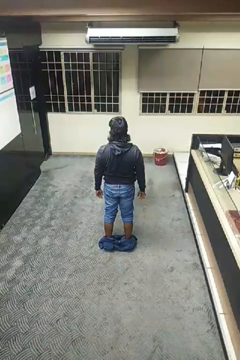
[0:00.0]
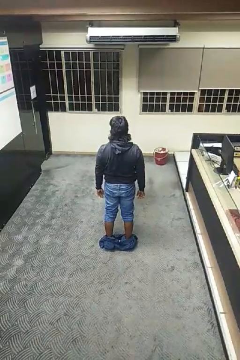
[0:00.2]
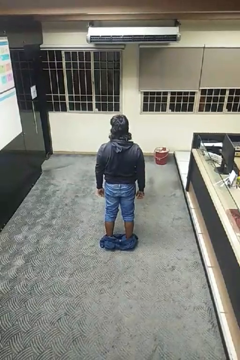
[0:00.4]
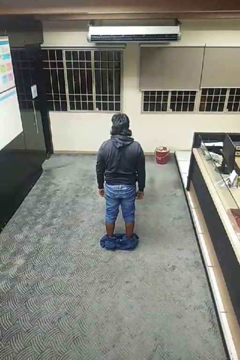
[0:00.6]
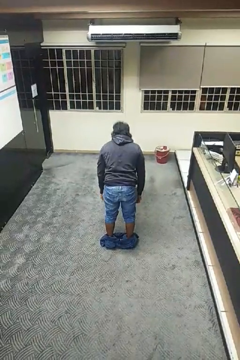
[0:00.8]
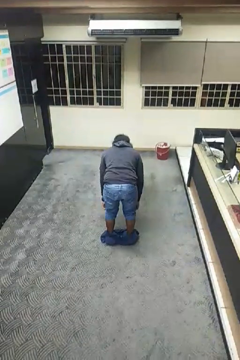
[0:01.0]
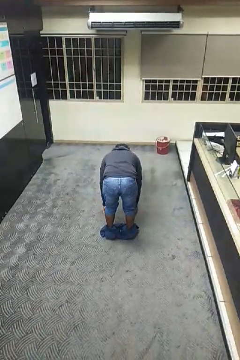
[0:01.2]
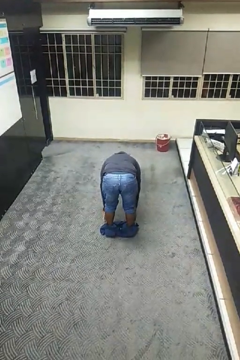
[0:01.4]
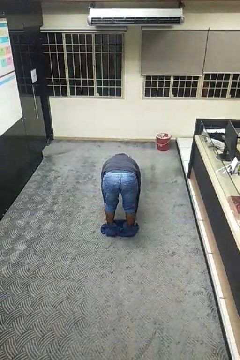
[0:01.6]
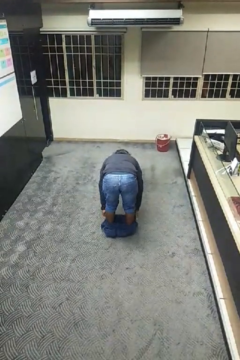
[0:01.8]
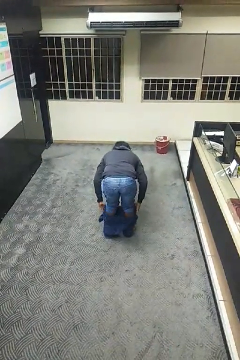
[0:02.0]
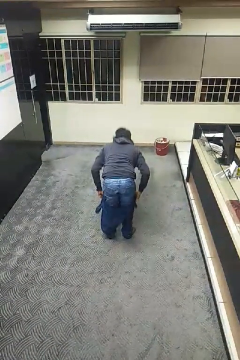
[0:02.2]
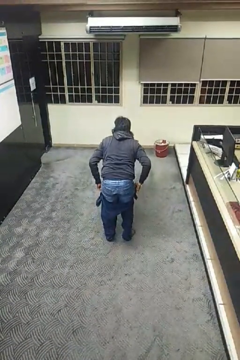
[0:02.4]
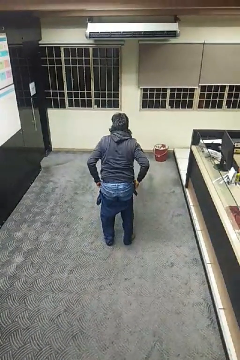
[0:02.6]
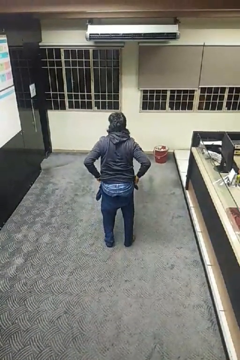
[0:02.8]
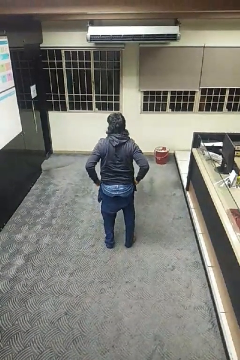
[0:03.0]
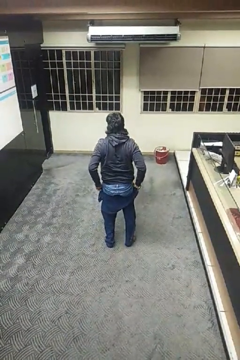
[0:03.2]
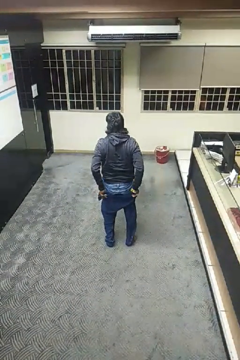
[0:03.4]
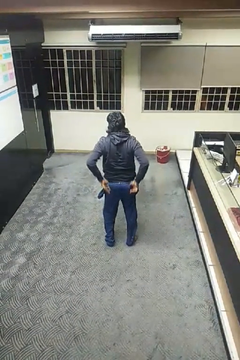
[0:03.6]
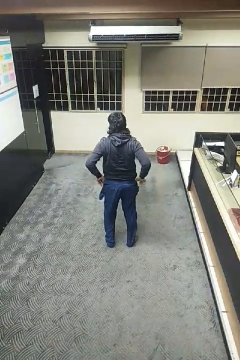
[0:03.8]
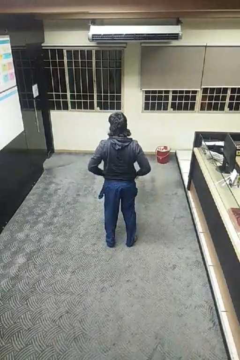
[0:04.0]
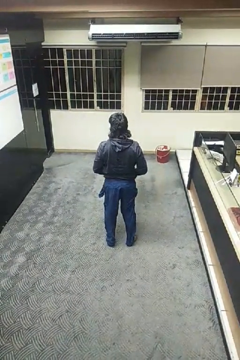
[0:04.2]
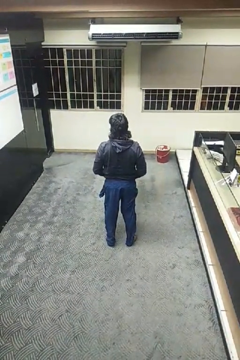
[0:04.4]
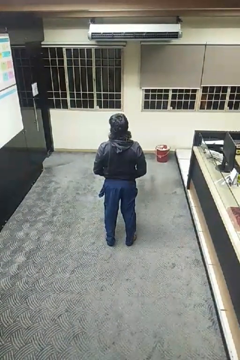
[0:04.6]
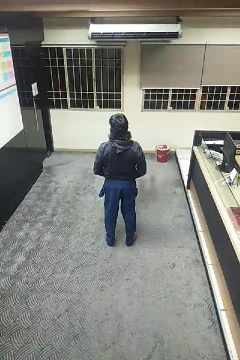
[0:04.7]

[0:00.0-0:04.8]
person puts on pants

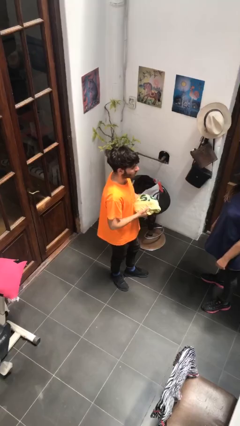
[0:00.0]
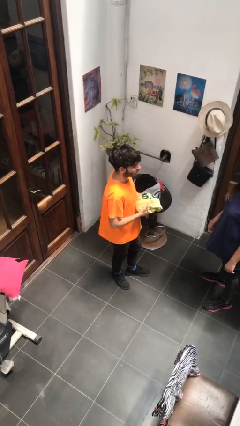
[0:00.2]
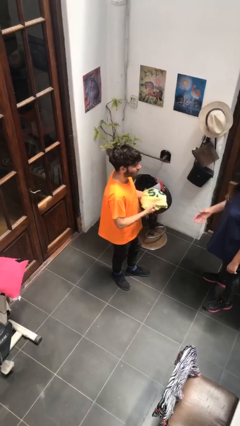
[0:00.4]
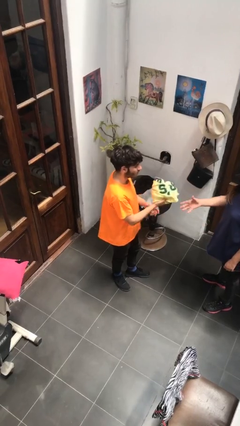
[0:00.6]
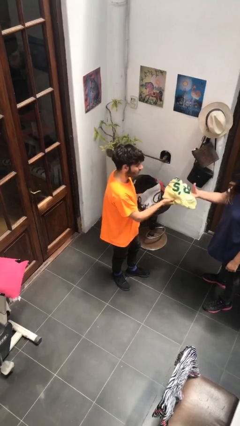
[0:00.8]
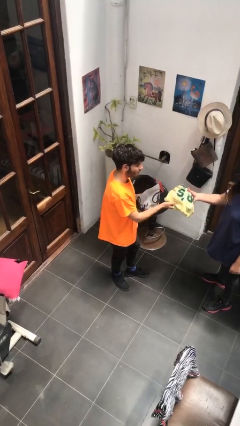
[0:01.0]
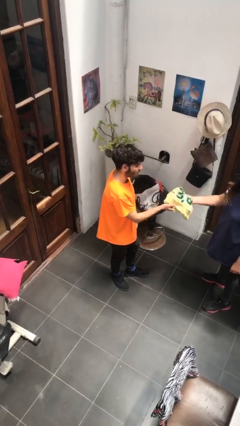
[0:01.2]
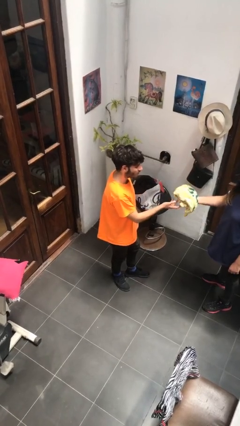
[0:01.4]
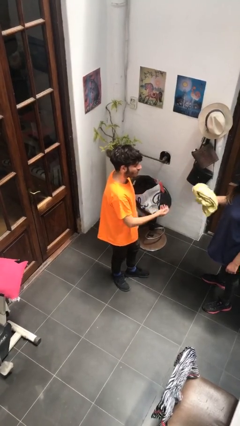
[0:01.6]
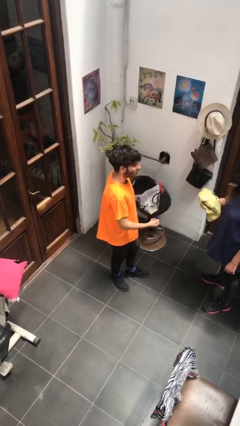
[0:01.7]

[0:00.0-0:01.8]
person transfers object to person

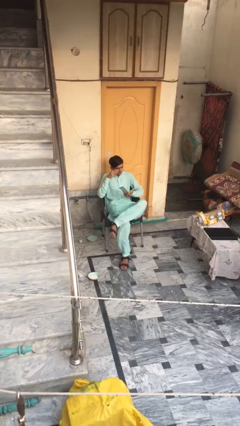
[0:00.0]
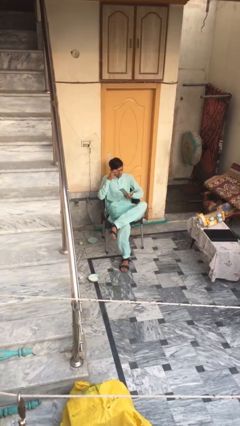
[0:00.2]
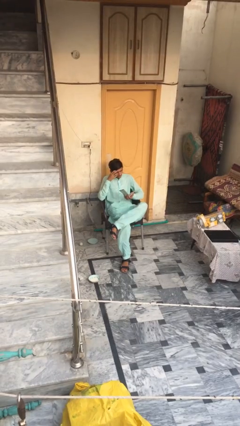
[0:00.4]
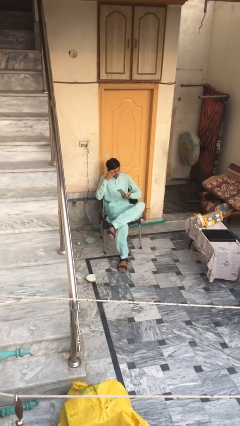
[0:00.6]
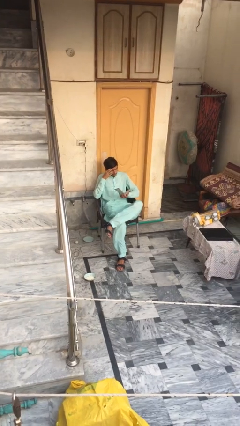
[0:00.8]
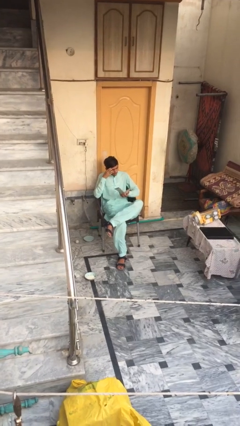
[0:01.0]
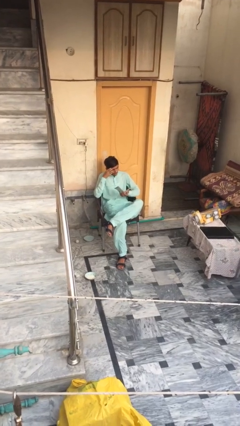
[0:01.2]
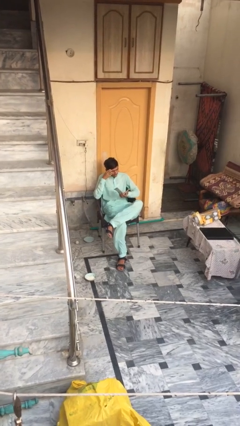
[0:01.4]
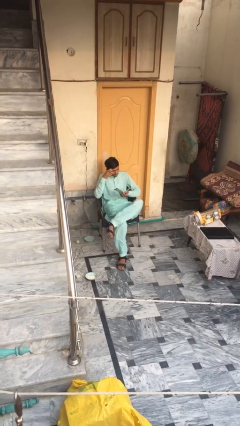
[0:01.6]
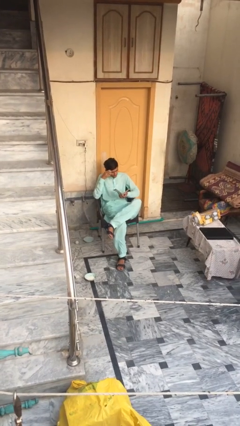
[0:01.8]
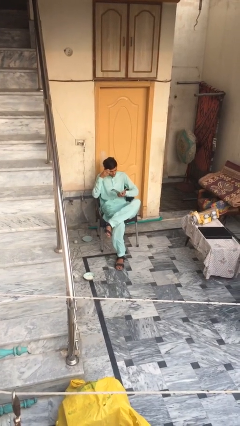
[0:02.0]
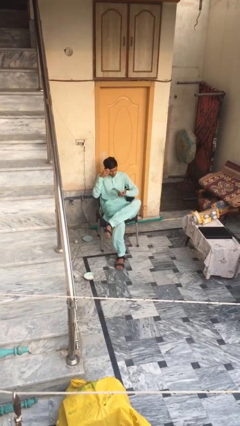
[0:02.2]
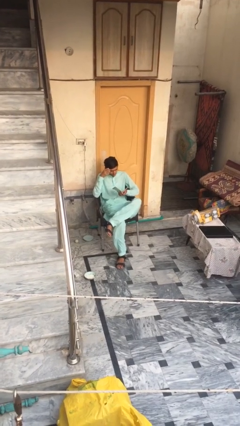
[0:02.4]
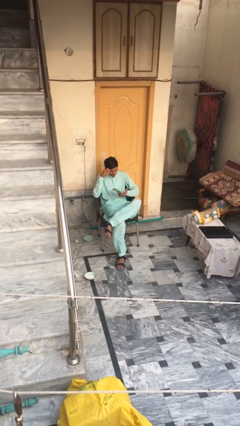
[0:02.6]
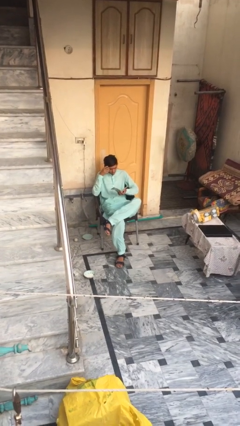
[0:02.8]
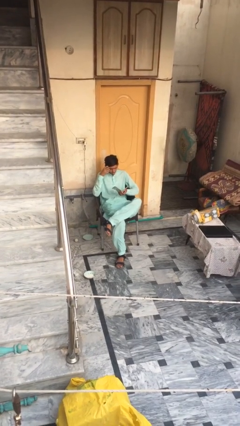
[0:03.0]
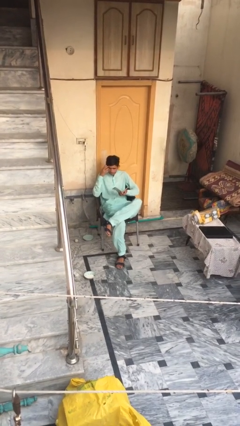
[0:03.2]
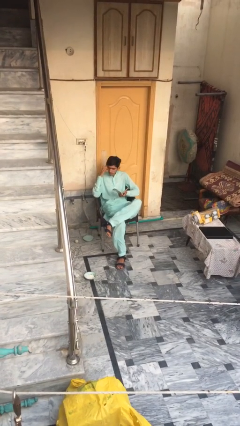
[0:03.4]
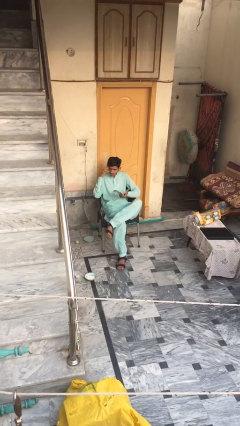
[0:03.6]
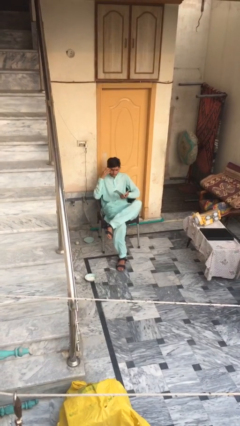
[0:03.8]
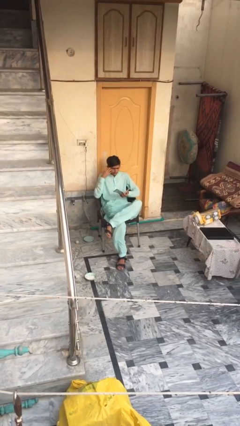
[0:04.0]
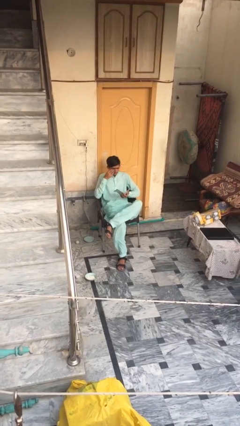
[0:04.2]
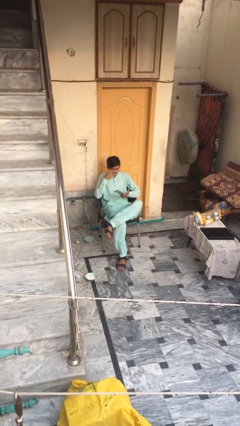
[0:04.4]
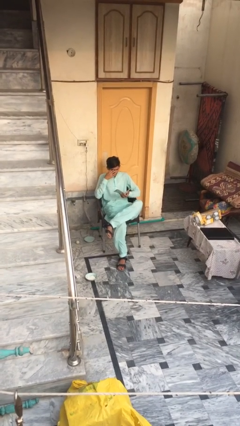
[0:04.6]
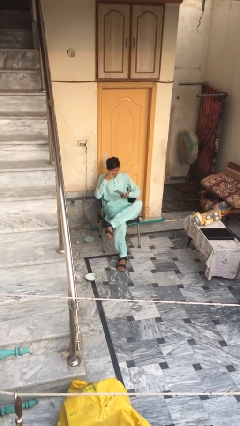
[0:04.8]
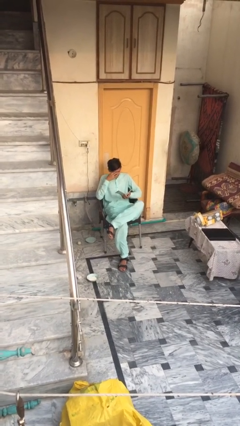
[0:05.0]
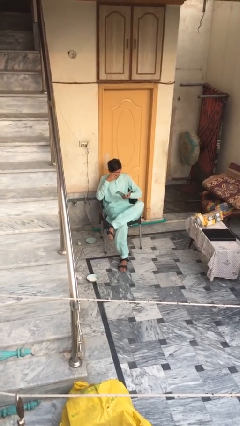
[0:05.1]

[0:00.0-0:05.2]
person reads document

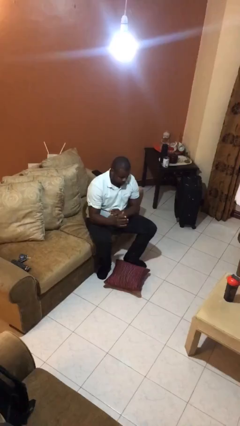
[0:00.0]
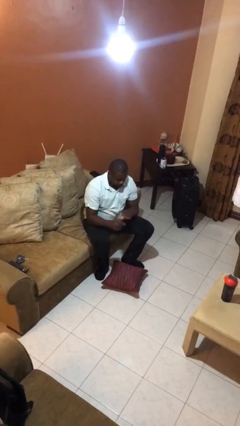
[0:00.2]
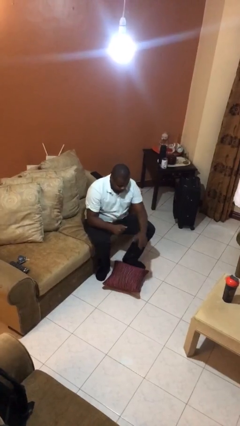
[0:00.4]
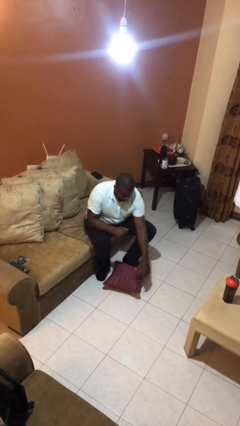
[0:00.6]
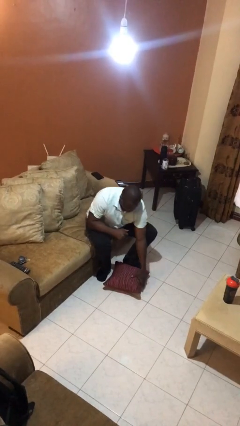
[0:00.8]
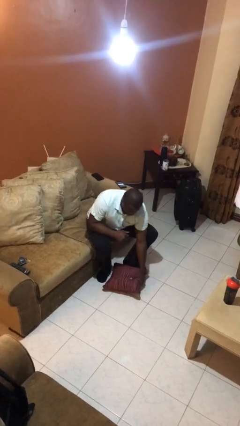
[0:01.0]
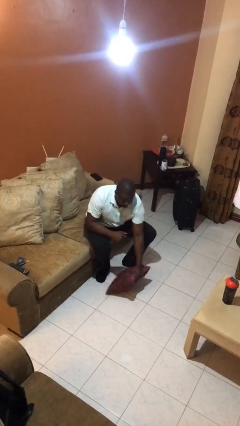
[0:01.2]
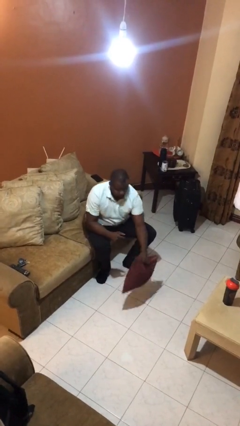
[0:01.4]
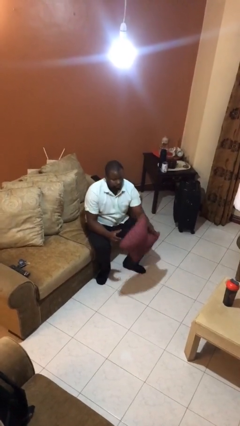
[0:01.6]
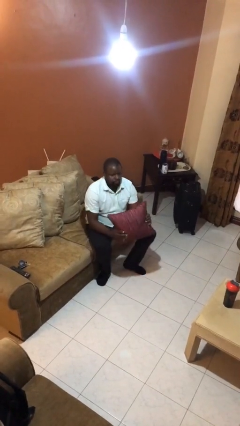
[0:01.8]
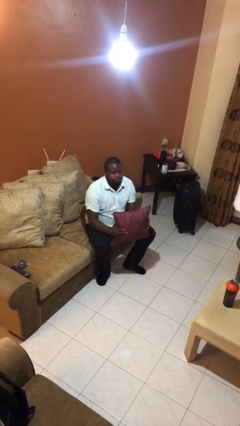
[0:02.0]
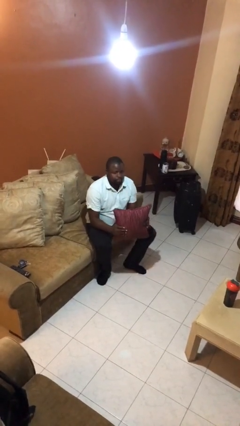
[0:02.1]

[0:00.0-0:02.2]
person picks up object from floor

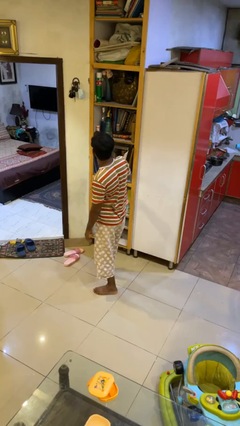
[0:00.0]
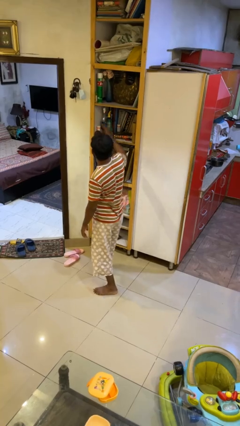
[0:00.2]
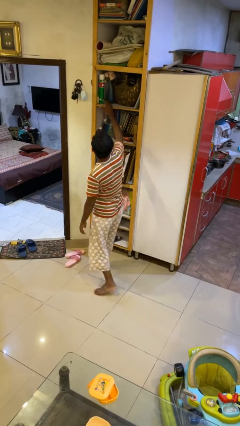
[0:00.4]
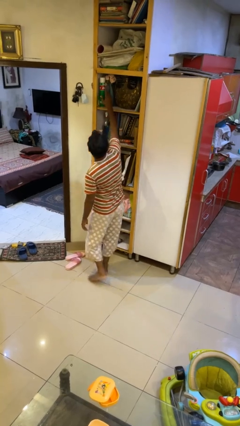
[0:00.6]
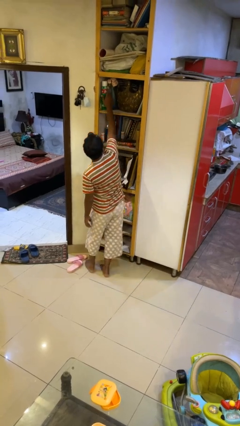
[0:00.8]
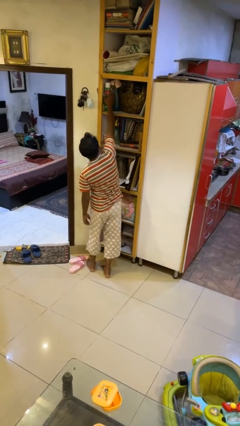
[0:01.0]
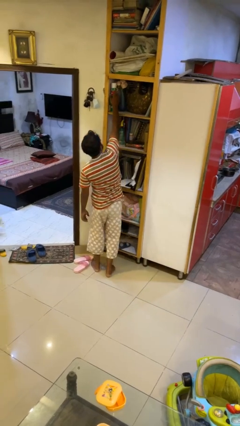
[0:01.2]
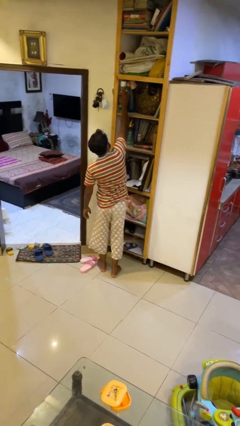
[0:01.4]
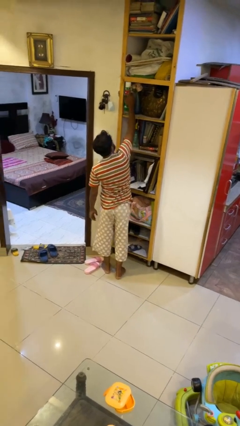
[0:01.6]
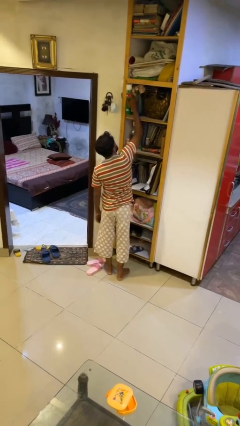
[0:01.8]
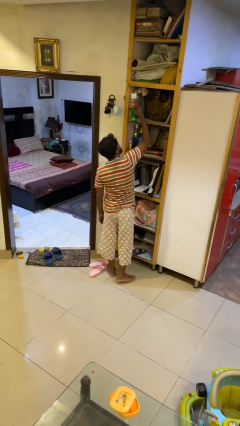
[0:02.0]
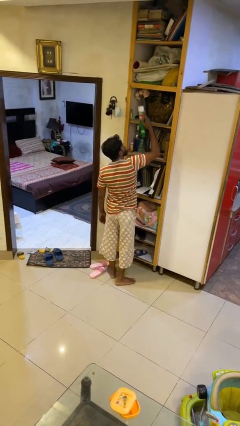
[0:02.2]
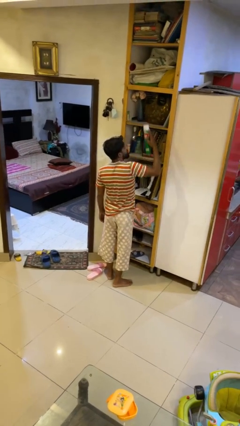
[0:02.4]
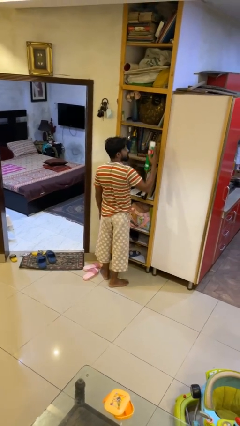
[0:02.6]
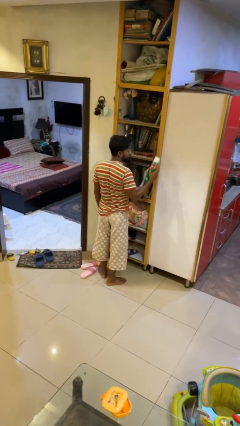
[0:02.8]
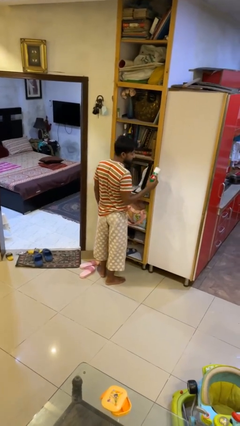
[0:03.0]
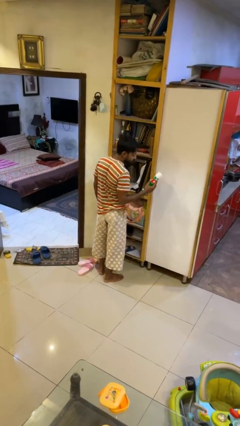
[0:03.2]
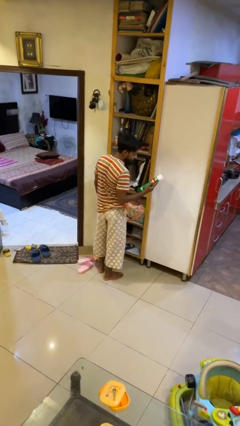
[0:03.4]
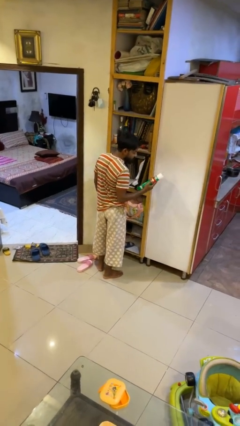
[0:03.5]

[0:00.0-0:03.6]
person picks up object from shelf

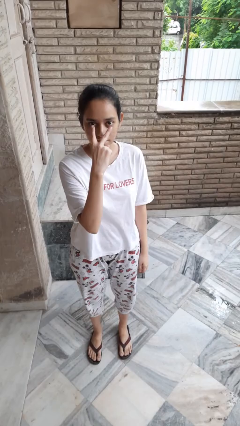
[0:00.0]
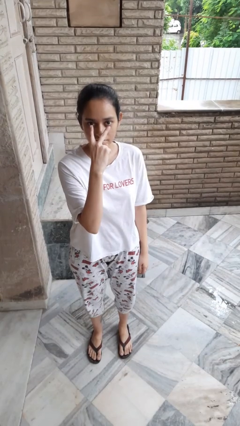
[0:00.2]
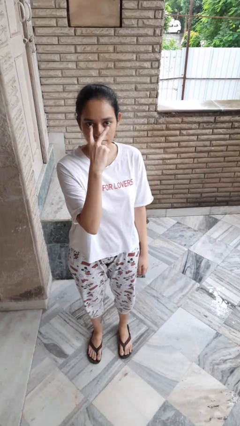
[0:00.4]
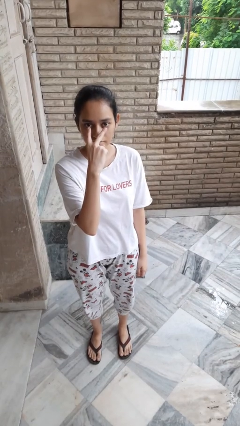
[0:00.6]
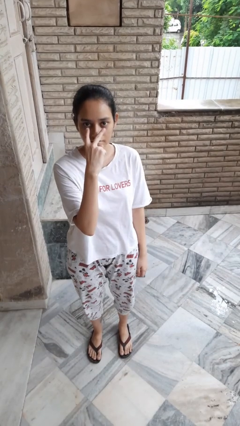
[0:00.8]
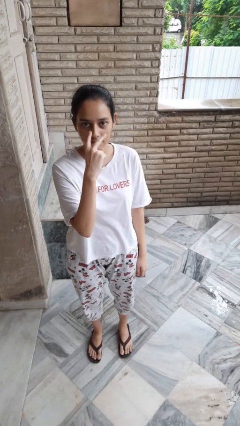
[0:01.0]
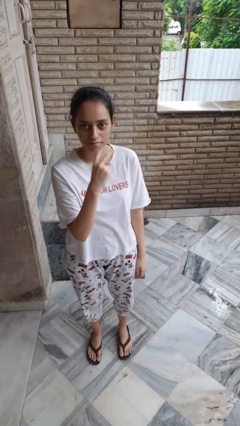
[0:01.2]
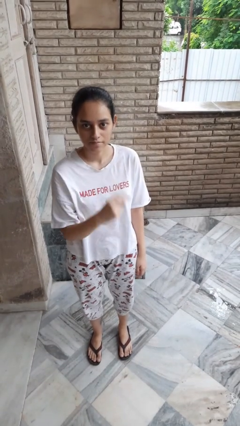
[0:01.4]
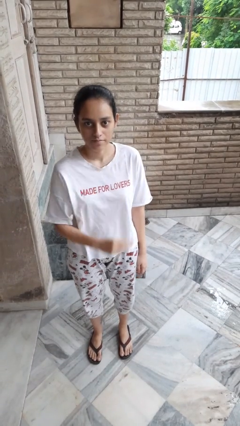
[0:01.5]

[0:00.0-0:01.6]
person gestures watch closely
